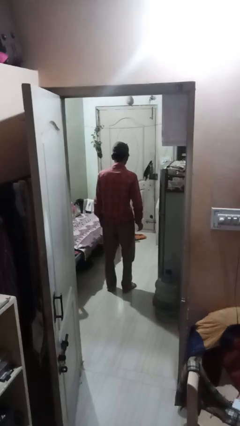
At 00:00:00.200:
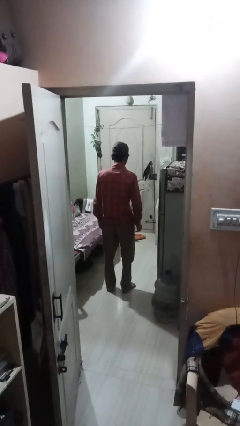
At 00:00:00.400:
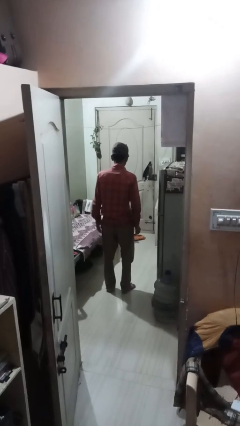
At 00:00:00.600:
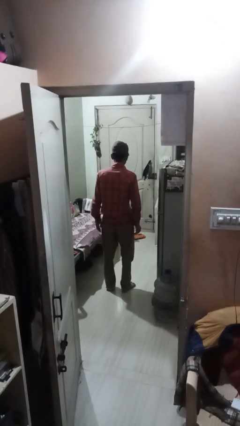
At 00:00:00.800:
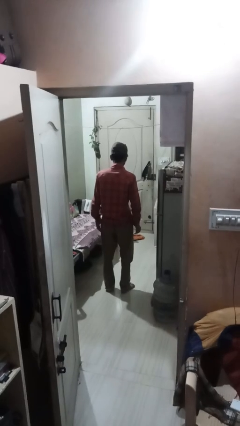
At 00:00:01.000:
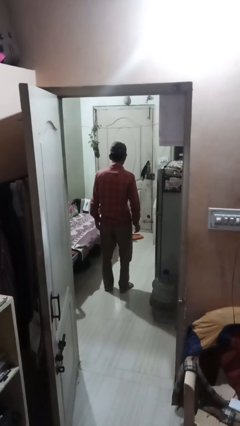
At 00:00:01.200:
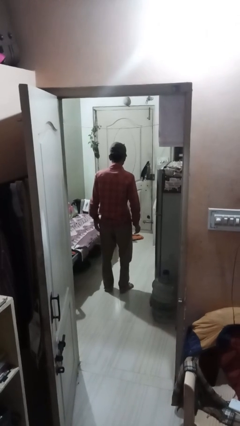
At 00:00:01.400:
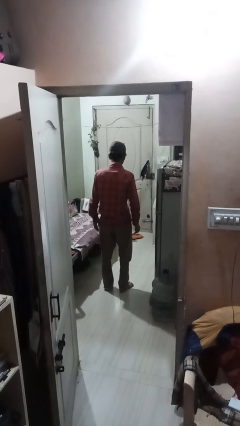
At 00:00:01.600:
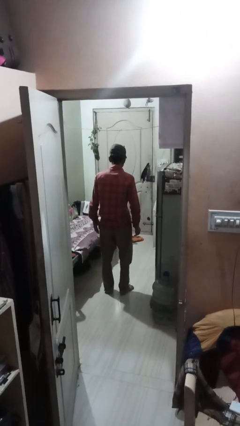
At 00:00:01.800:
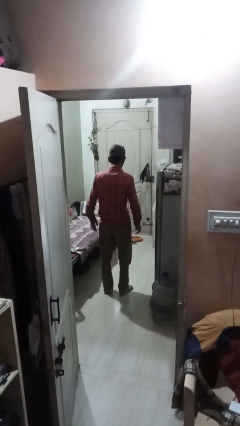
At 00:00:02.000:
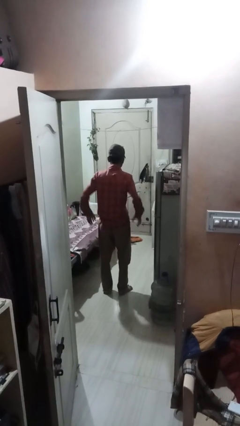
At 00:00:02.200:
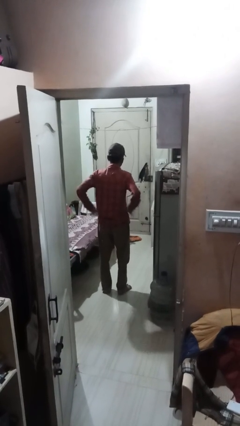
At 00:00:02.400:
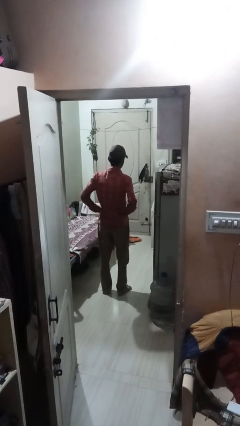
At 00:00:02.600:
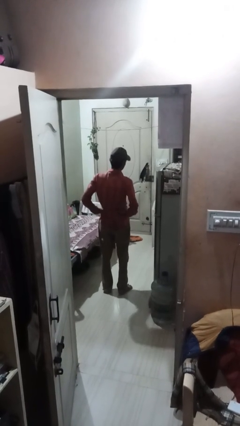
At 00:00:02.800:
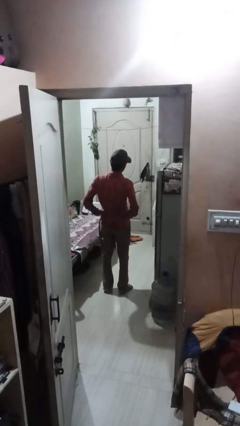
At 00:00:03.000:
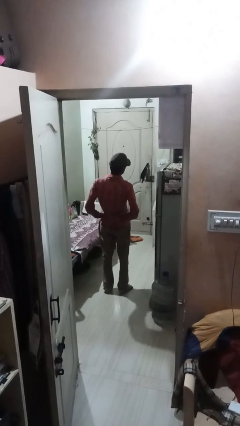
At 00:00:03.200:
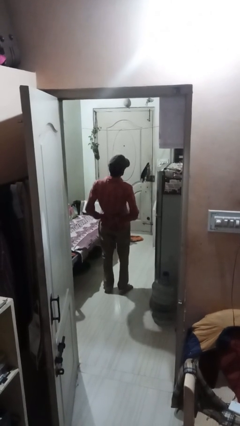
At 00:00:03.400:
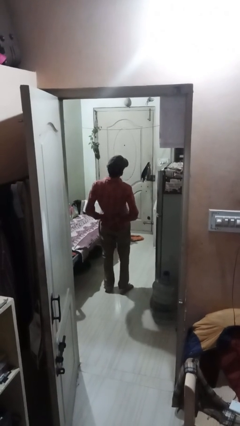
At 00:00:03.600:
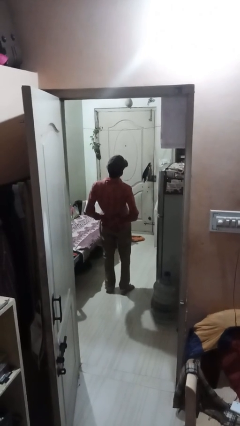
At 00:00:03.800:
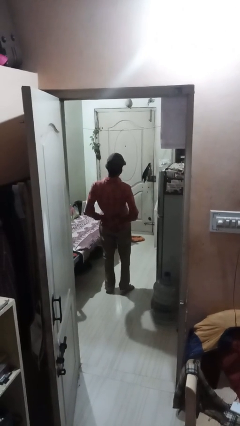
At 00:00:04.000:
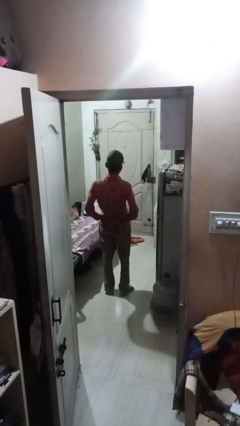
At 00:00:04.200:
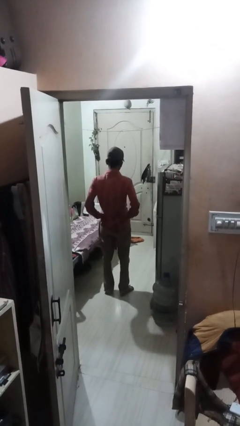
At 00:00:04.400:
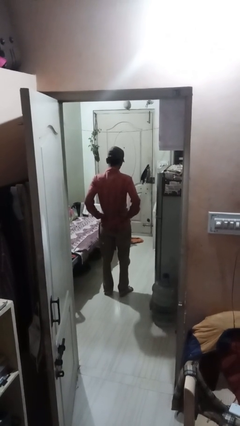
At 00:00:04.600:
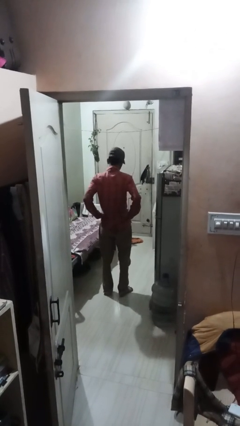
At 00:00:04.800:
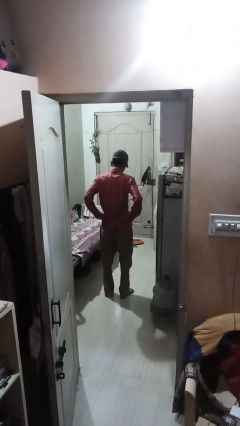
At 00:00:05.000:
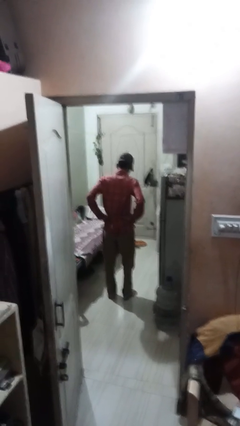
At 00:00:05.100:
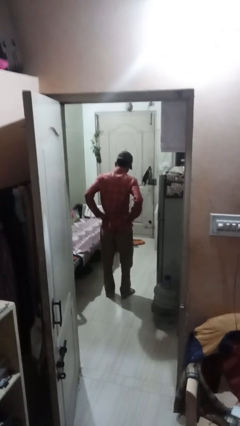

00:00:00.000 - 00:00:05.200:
person stretches back

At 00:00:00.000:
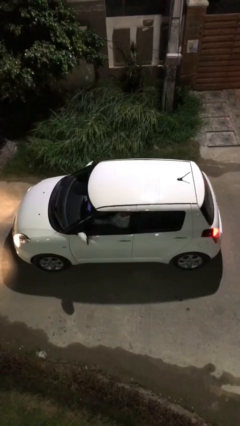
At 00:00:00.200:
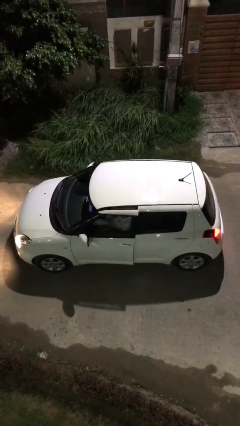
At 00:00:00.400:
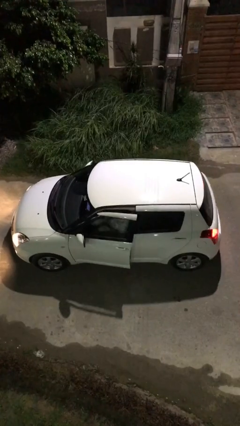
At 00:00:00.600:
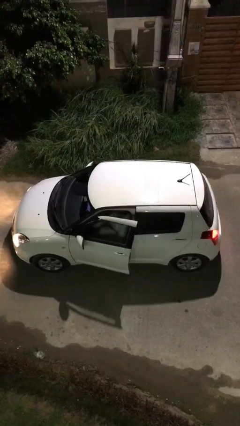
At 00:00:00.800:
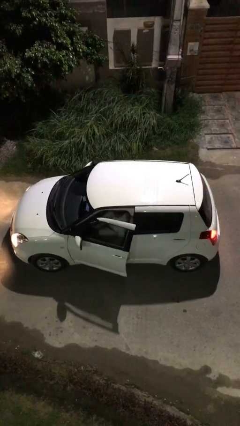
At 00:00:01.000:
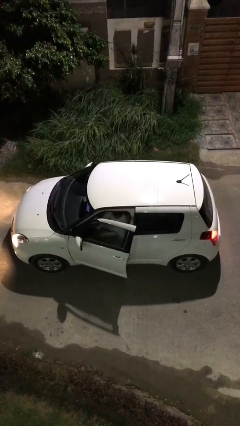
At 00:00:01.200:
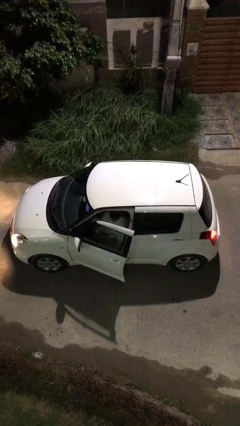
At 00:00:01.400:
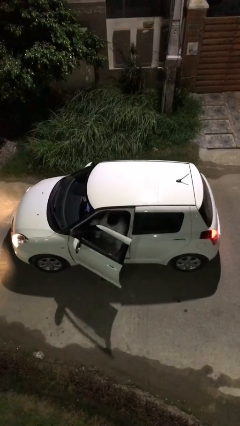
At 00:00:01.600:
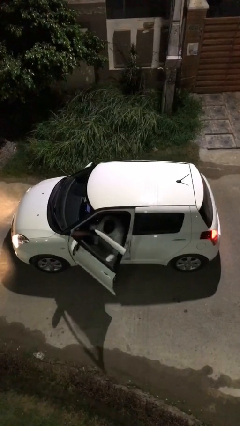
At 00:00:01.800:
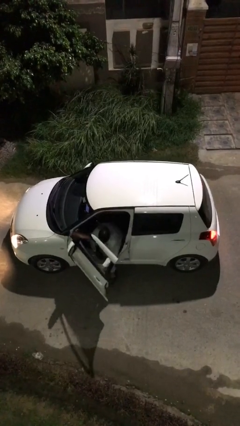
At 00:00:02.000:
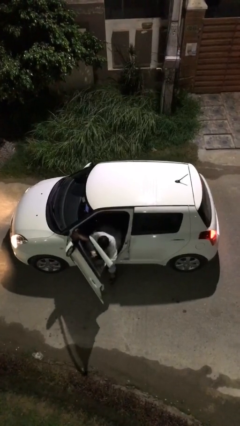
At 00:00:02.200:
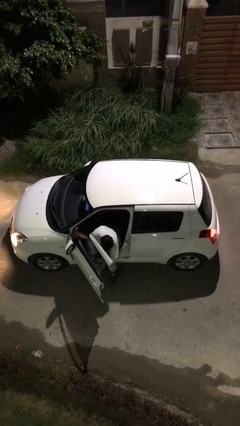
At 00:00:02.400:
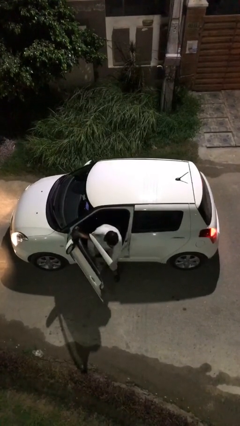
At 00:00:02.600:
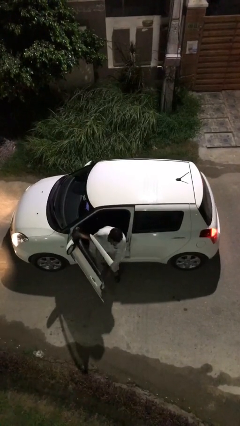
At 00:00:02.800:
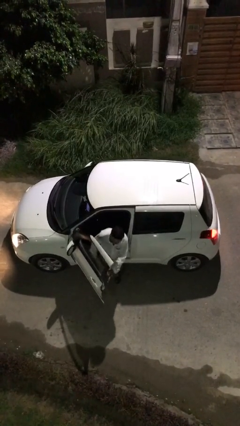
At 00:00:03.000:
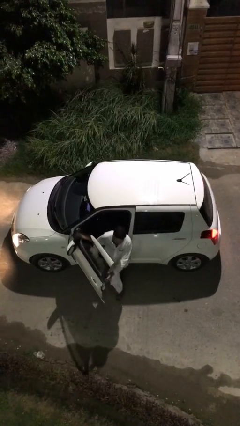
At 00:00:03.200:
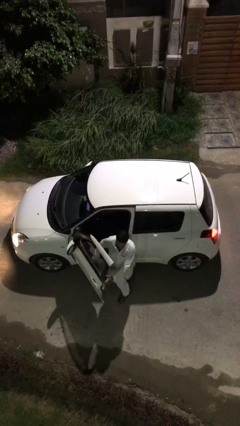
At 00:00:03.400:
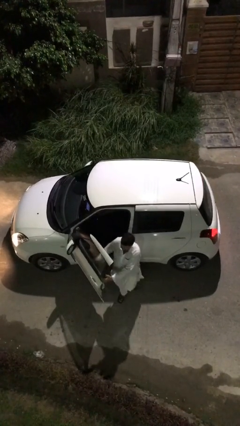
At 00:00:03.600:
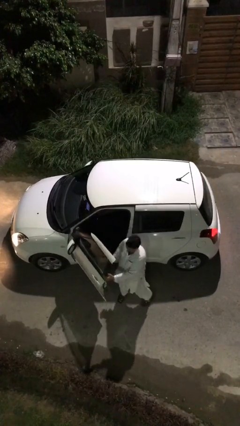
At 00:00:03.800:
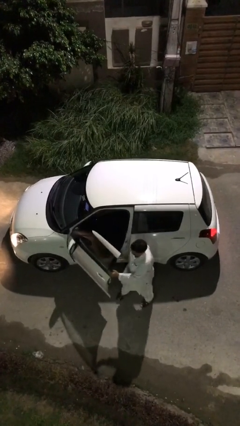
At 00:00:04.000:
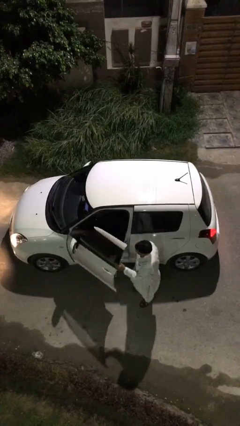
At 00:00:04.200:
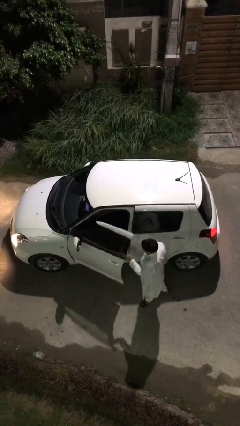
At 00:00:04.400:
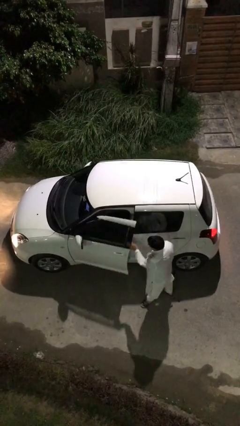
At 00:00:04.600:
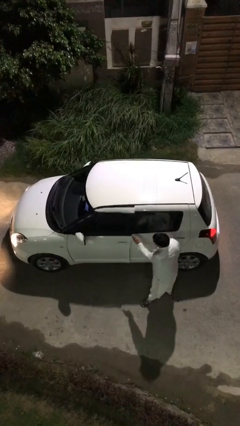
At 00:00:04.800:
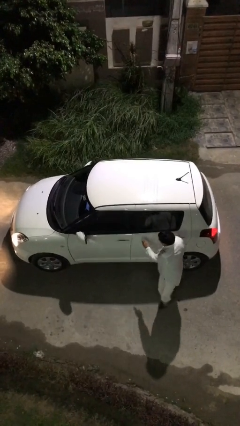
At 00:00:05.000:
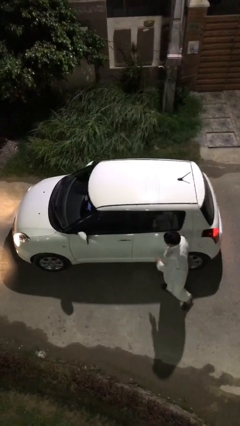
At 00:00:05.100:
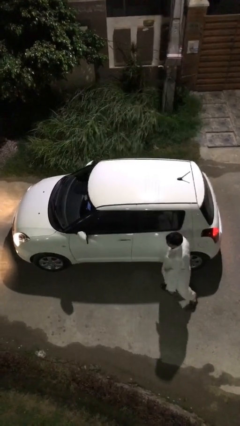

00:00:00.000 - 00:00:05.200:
car drops off person

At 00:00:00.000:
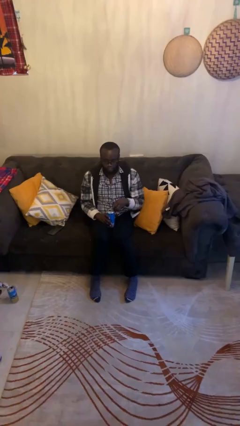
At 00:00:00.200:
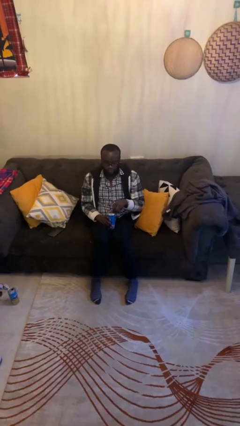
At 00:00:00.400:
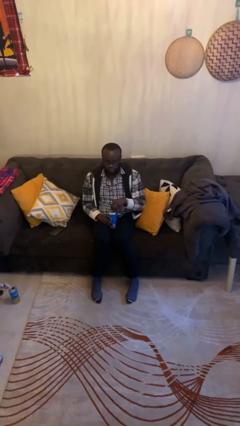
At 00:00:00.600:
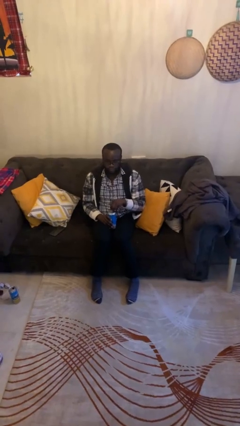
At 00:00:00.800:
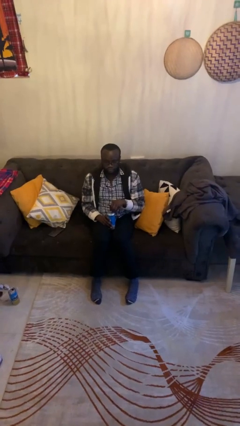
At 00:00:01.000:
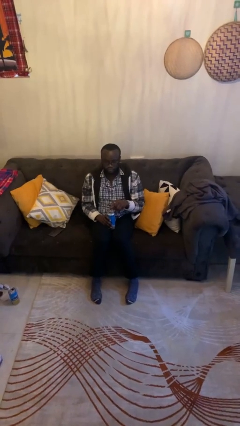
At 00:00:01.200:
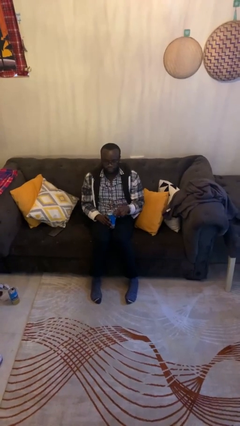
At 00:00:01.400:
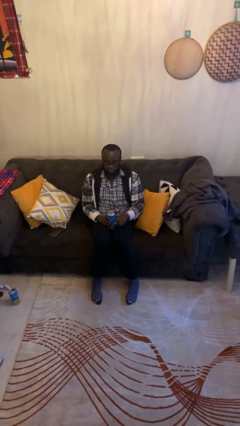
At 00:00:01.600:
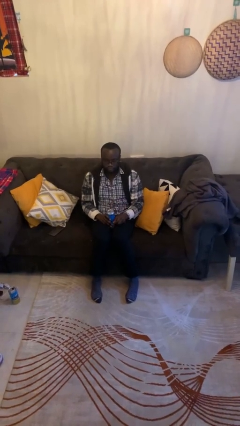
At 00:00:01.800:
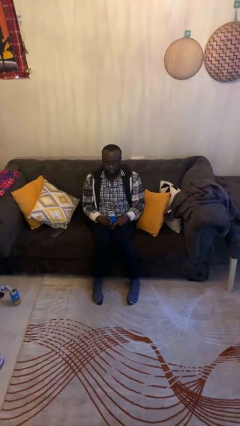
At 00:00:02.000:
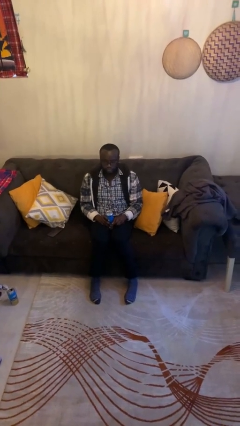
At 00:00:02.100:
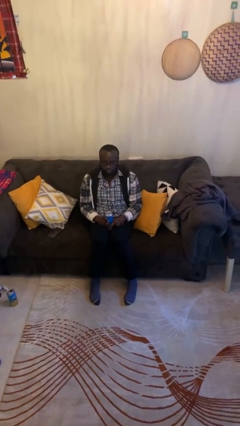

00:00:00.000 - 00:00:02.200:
person opens beverage can

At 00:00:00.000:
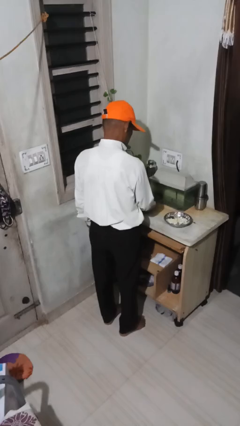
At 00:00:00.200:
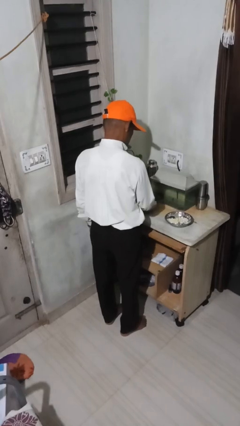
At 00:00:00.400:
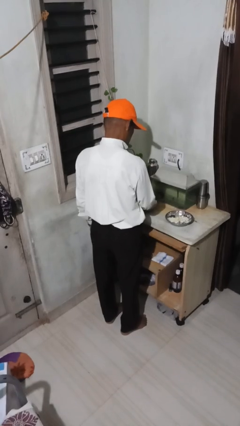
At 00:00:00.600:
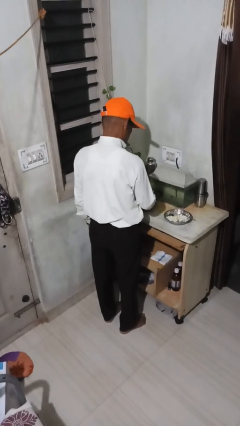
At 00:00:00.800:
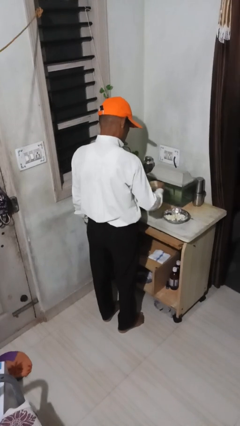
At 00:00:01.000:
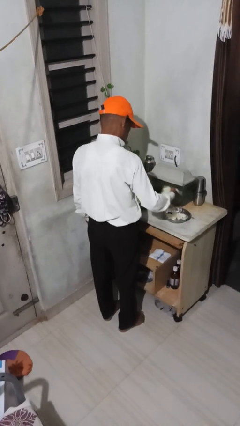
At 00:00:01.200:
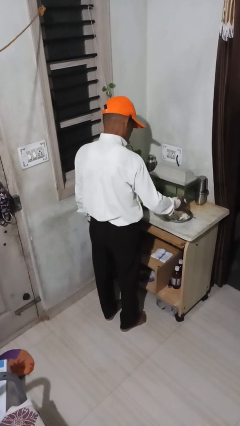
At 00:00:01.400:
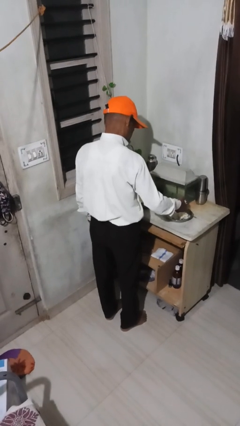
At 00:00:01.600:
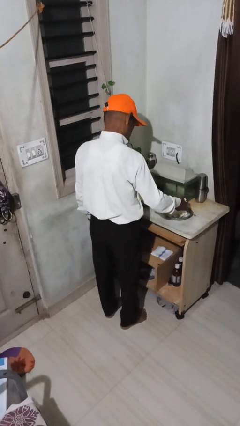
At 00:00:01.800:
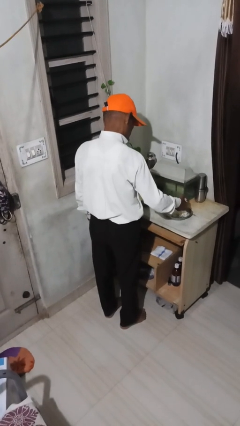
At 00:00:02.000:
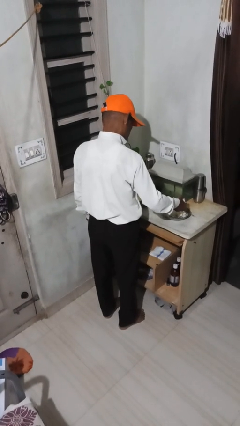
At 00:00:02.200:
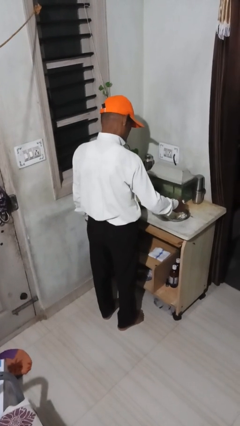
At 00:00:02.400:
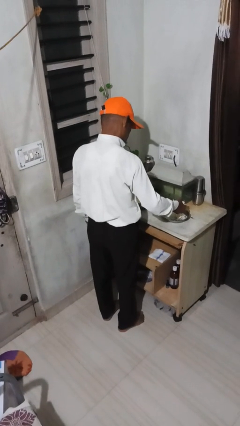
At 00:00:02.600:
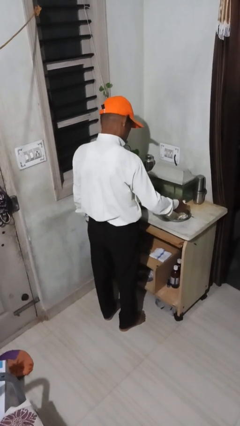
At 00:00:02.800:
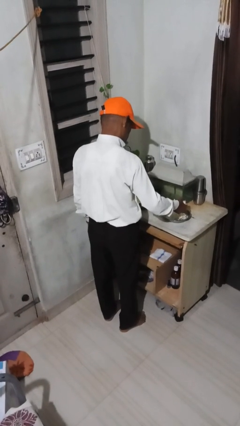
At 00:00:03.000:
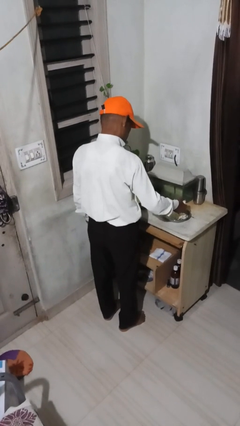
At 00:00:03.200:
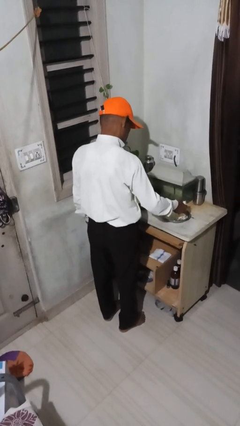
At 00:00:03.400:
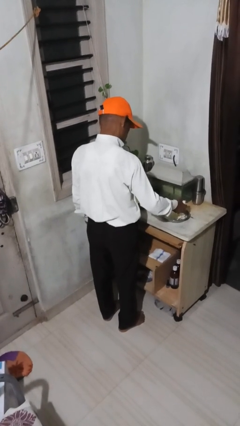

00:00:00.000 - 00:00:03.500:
person pours into bowl

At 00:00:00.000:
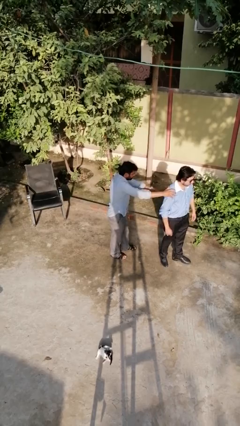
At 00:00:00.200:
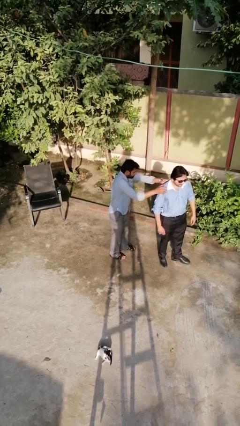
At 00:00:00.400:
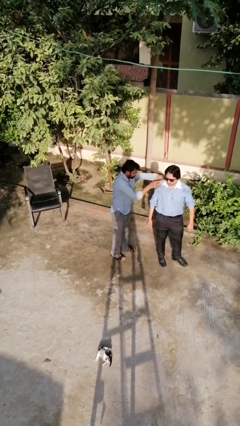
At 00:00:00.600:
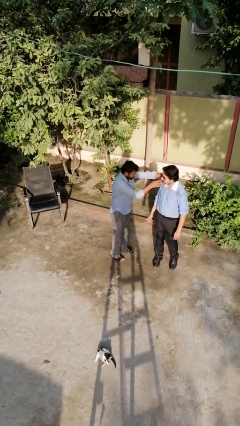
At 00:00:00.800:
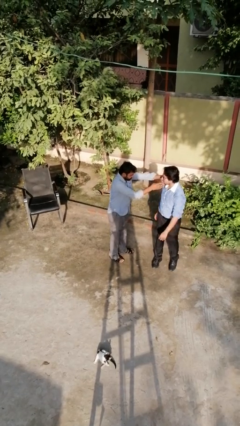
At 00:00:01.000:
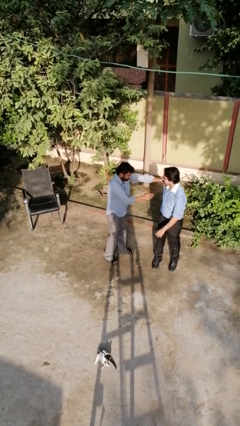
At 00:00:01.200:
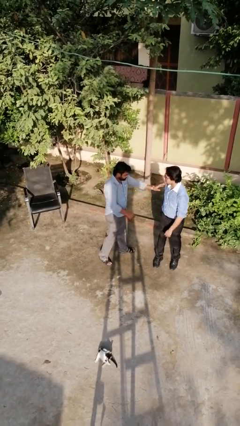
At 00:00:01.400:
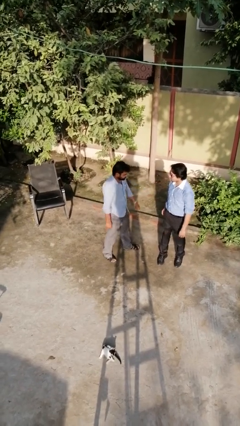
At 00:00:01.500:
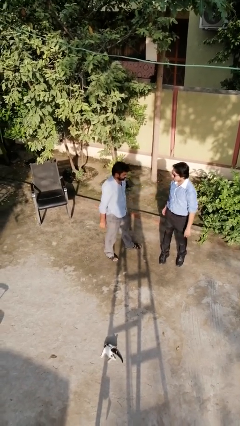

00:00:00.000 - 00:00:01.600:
person spins person around
